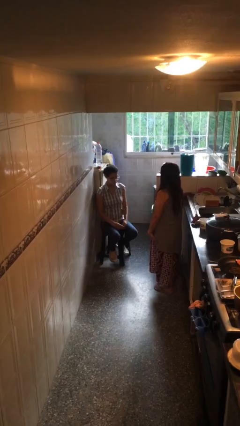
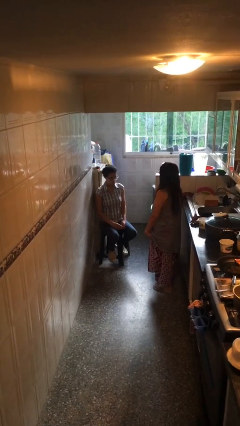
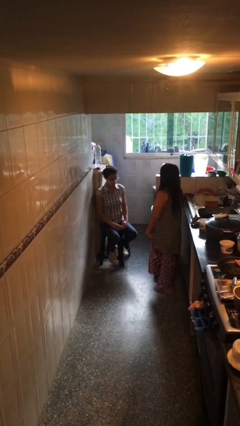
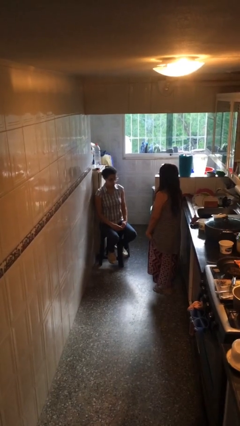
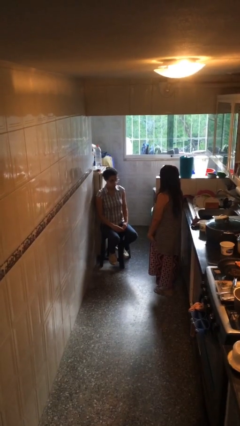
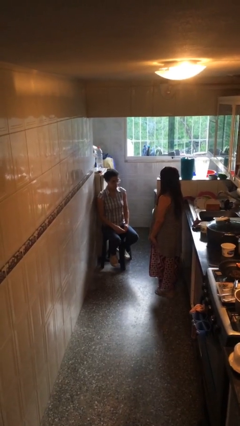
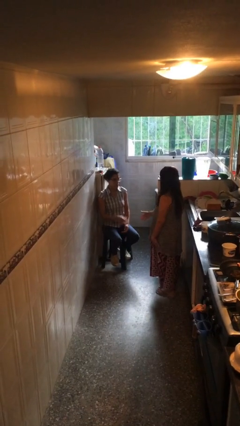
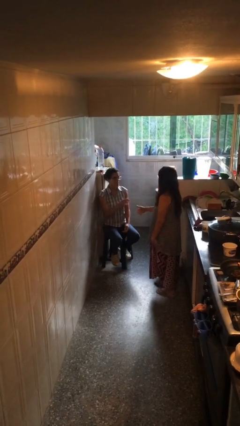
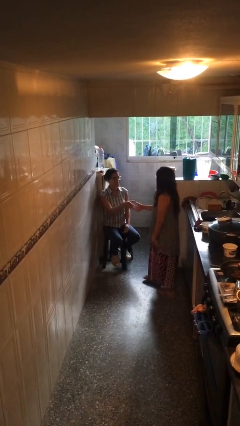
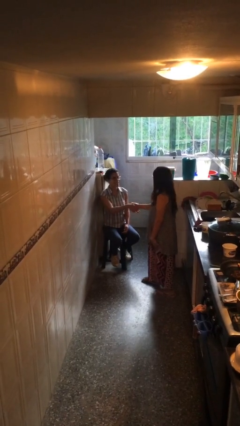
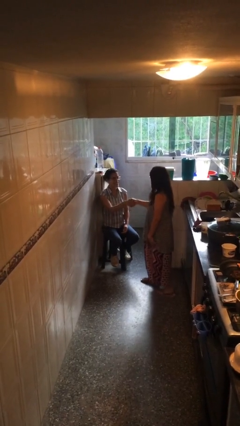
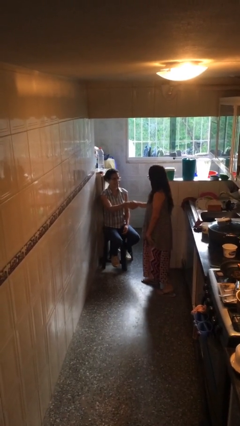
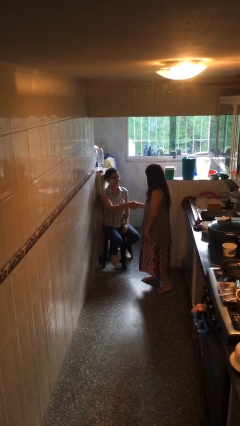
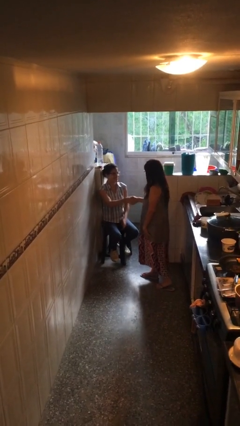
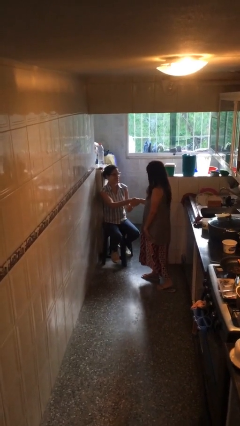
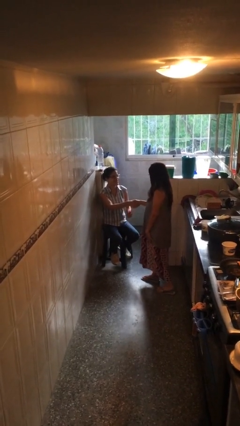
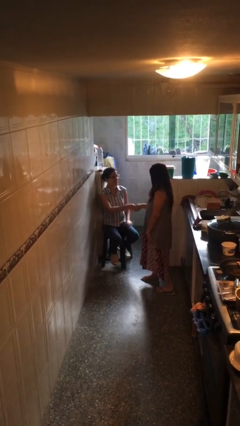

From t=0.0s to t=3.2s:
person shakes hand

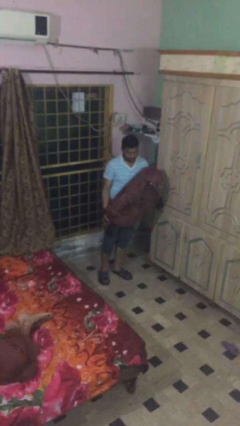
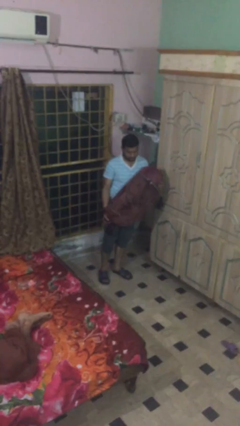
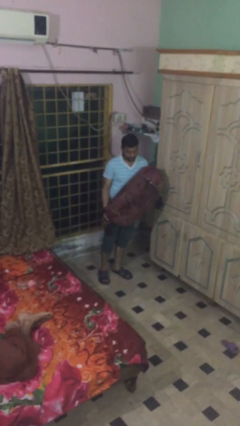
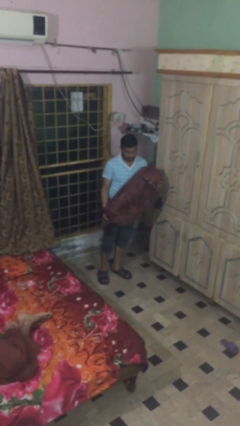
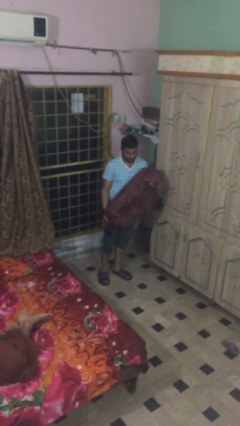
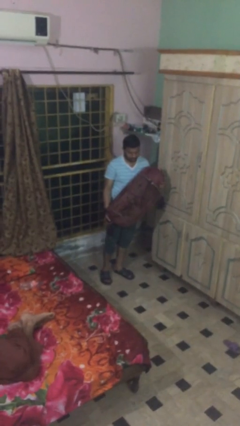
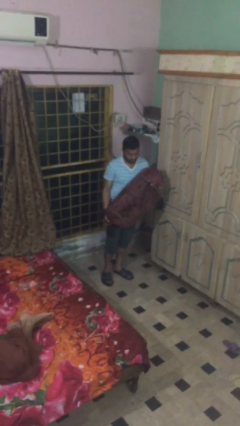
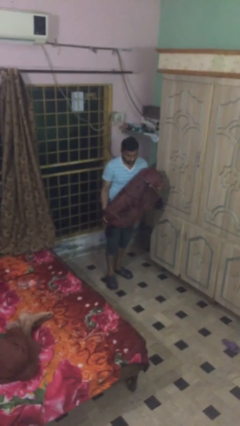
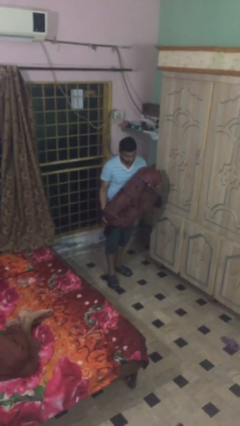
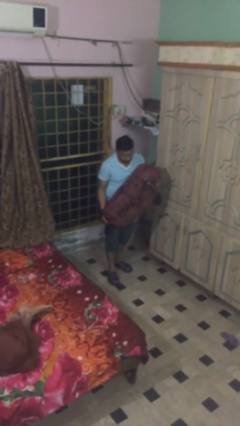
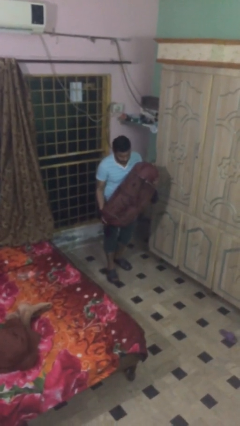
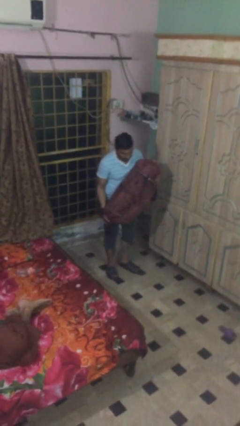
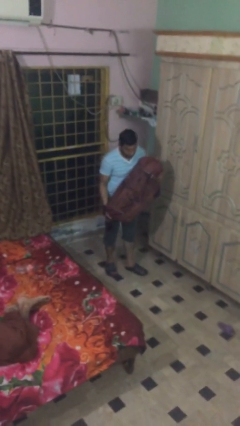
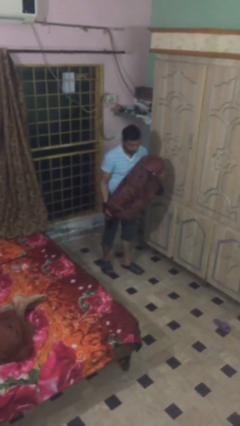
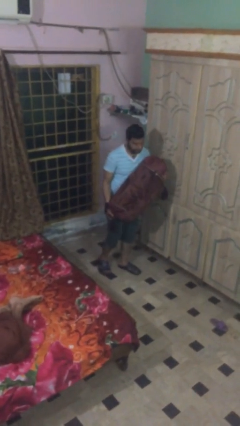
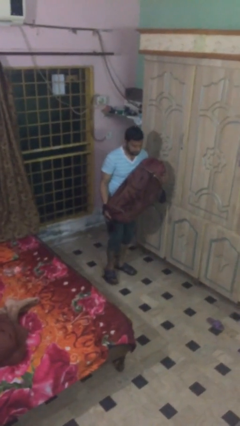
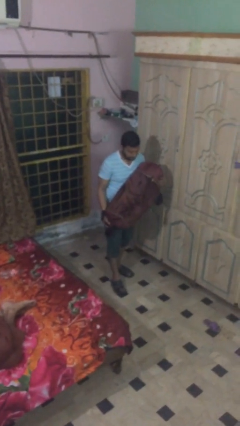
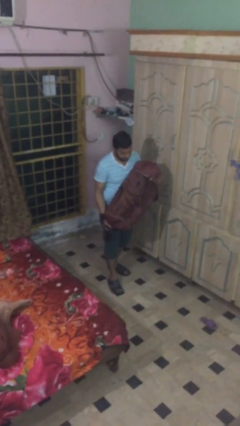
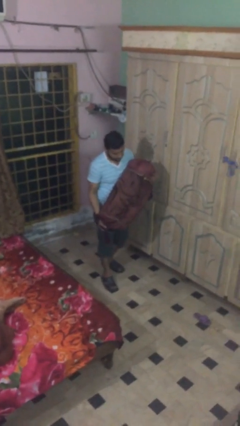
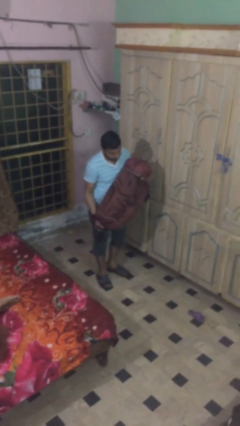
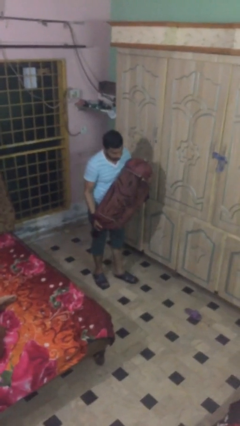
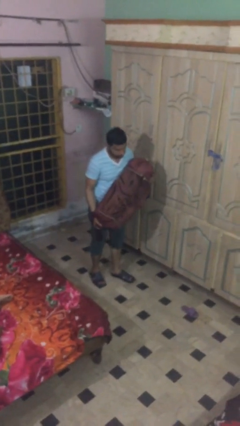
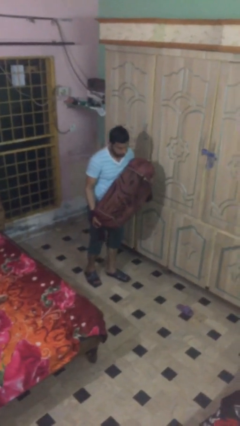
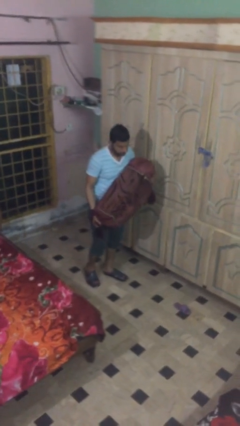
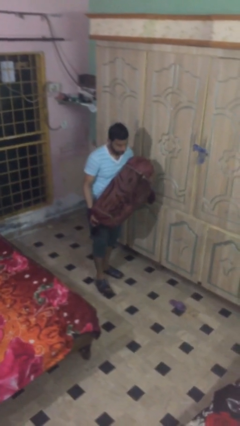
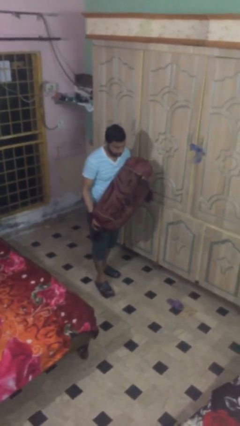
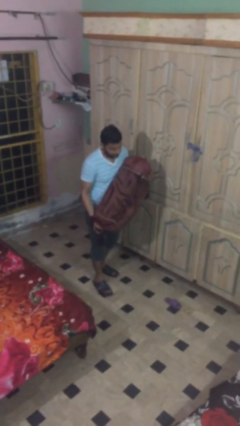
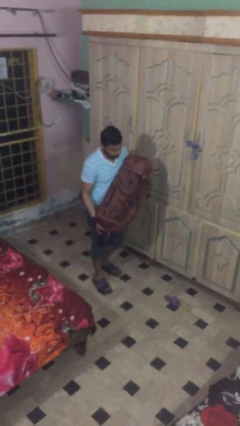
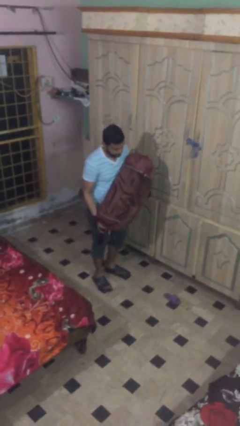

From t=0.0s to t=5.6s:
person carries heavy object

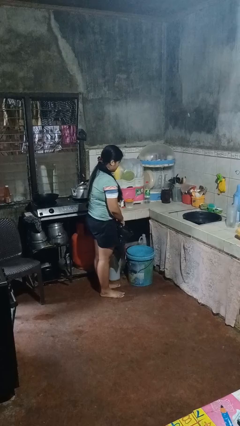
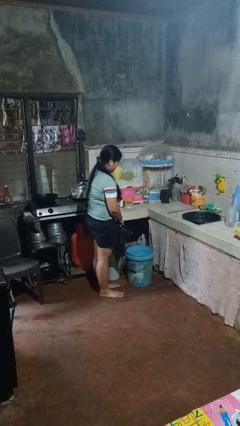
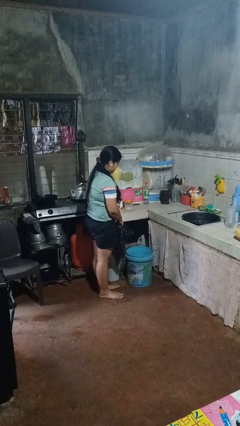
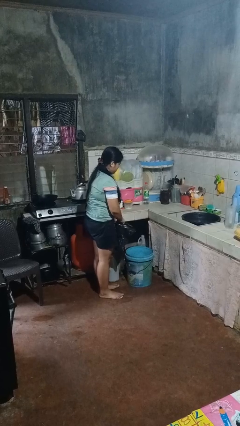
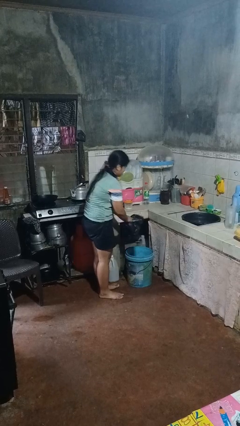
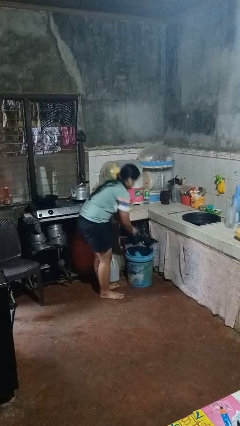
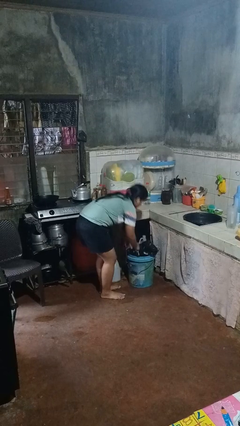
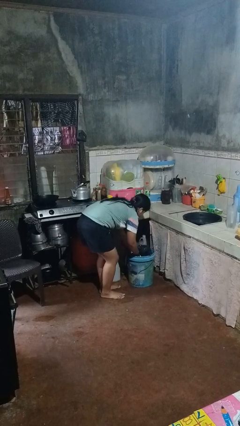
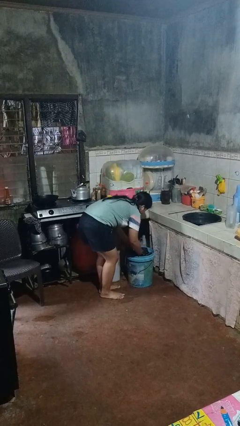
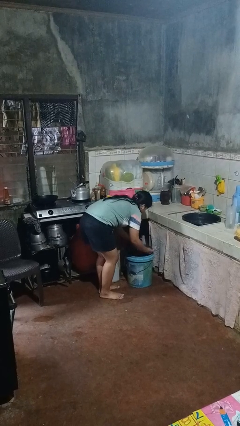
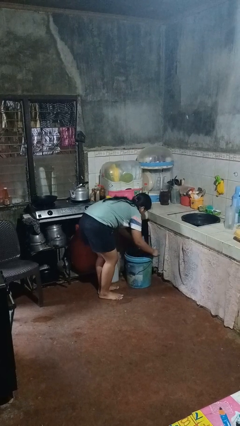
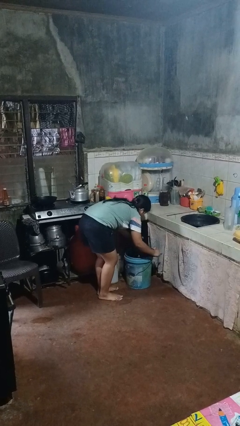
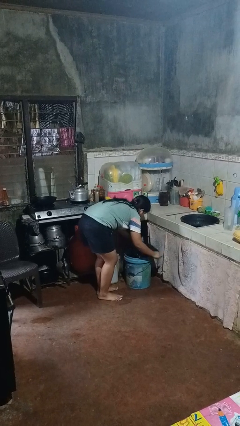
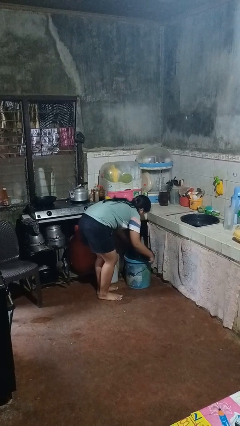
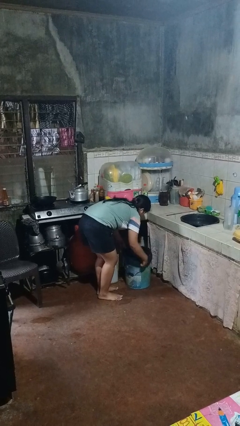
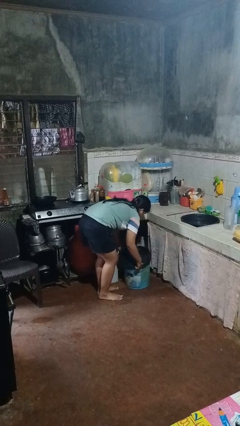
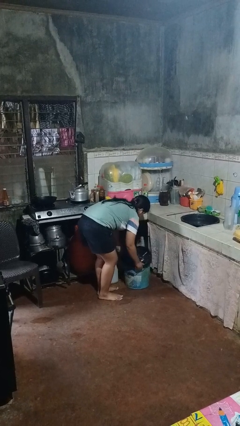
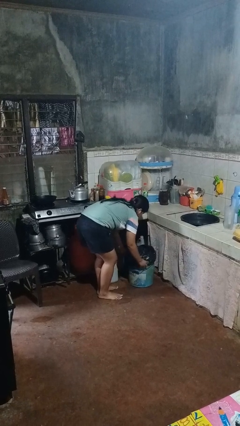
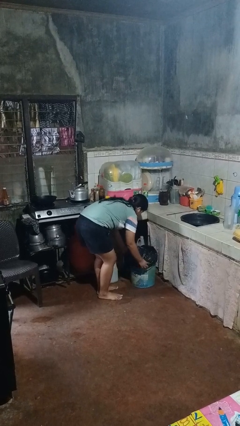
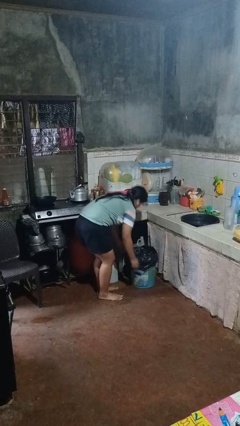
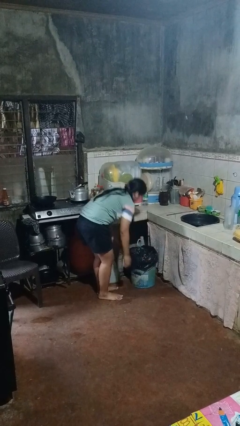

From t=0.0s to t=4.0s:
person inserts trashbag into trashcan

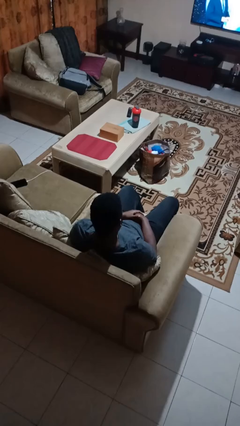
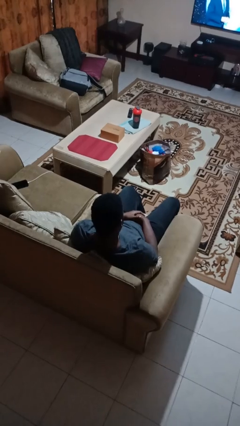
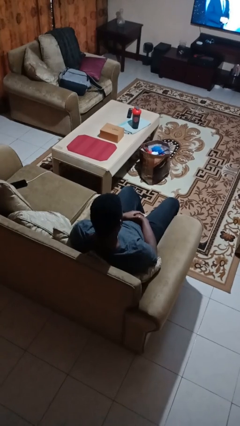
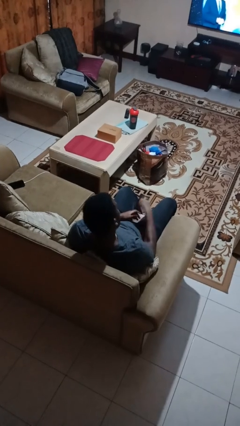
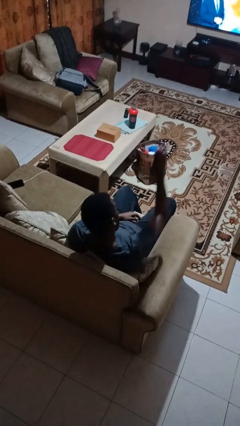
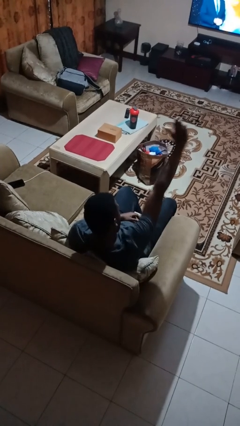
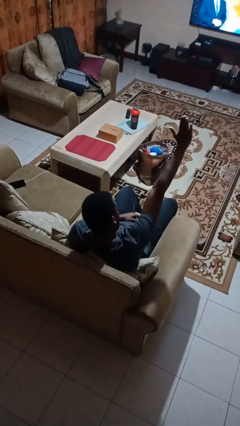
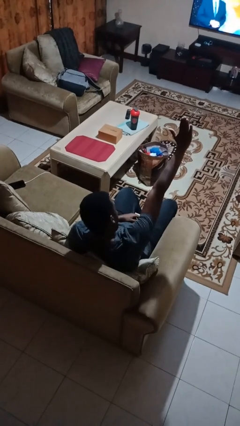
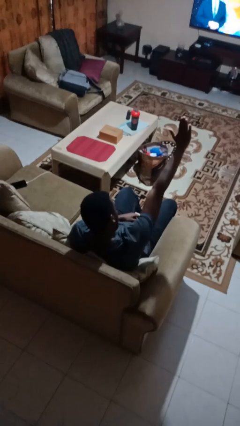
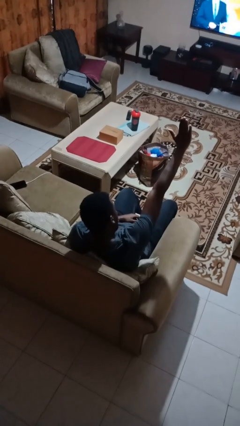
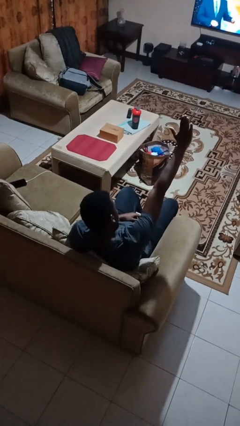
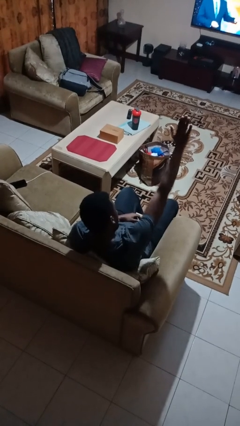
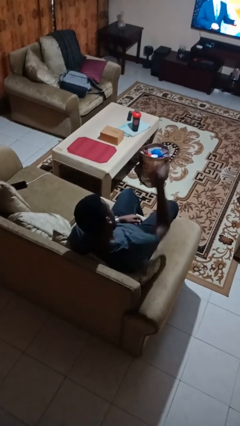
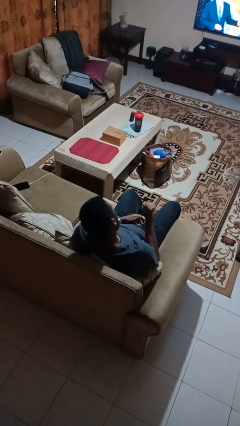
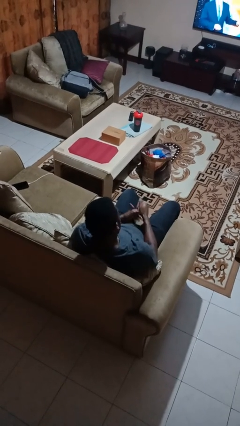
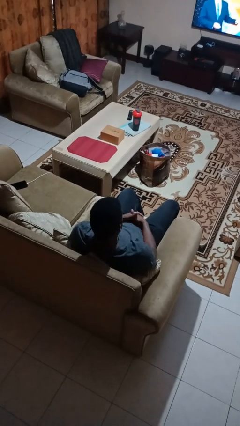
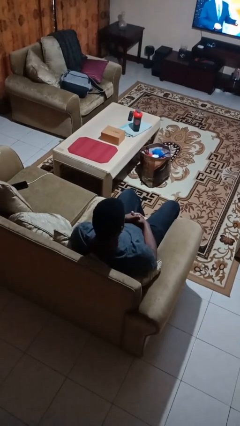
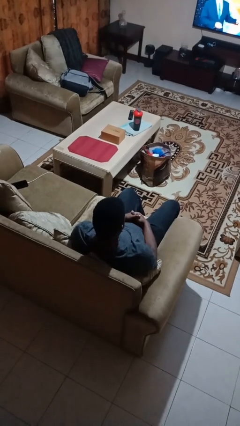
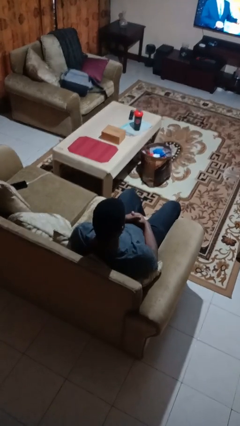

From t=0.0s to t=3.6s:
person gestures stop

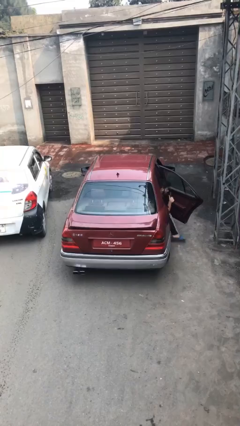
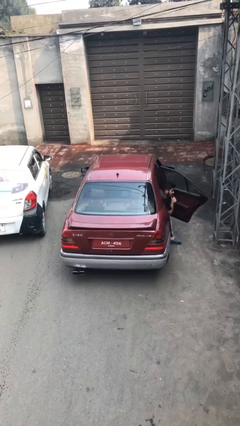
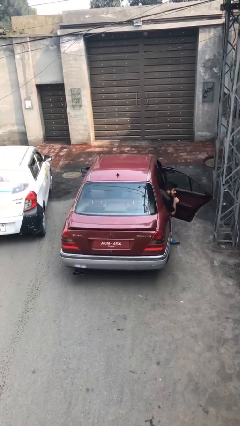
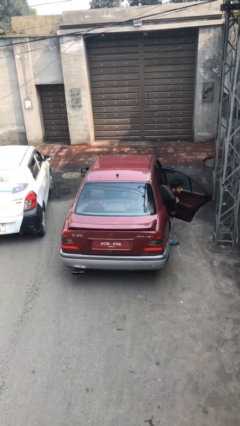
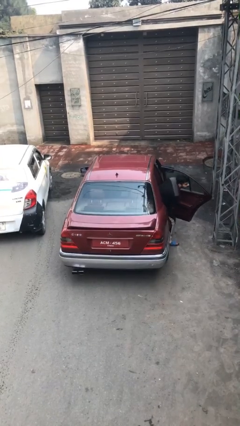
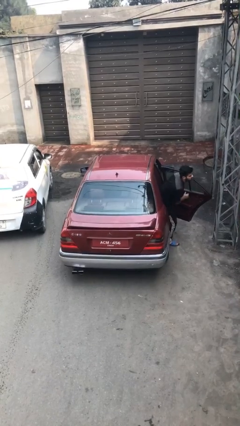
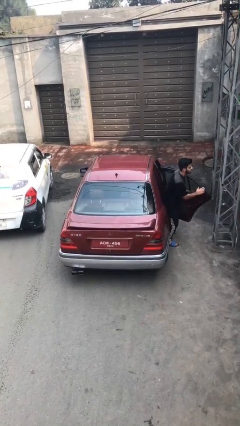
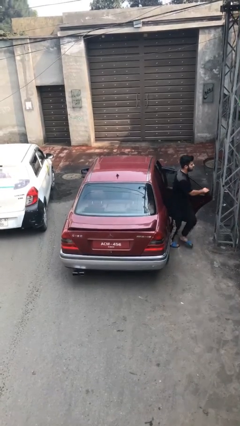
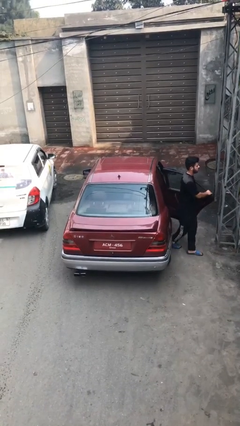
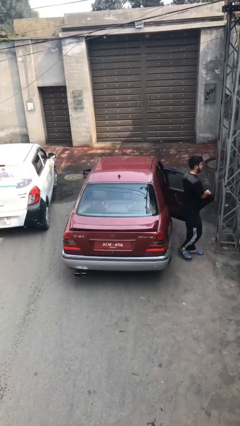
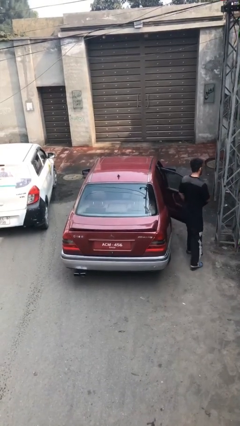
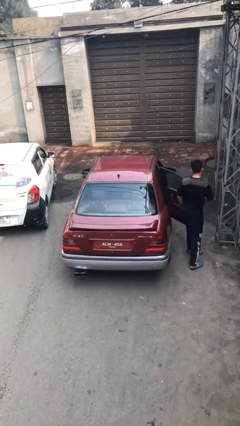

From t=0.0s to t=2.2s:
car drops off person
